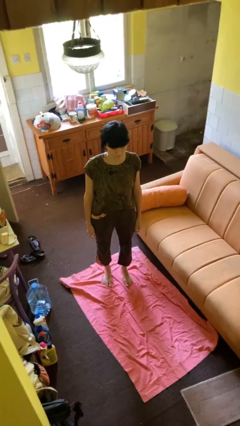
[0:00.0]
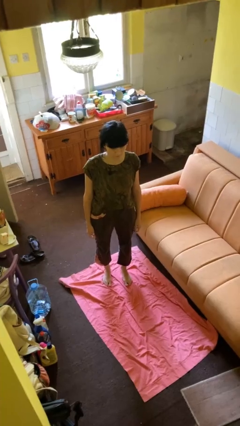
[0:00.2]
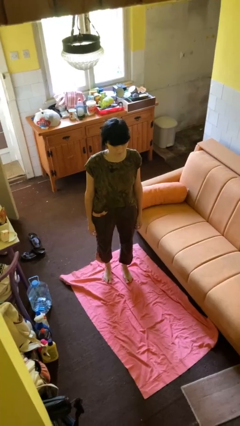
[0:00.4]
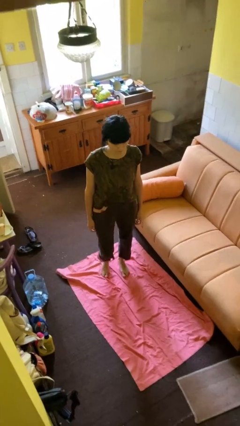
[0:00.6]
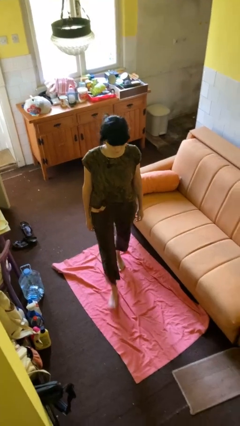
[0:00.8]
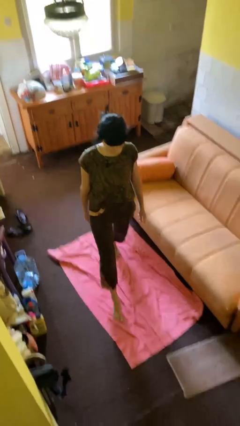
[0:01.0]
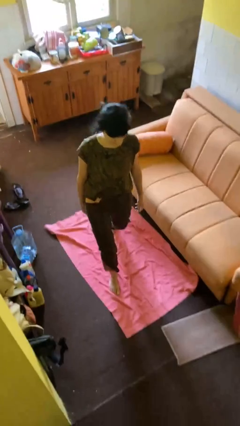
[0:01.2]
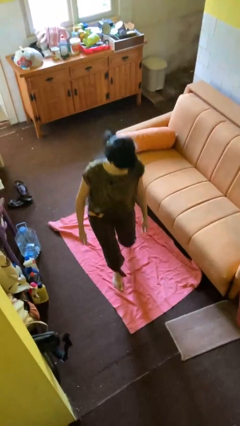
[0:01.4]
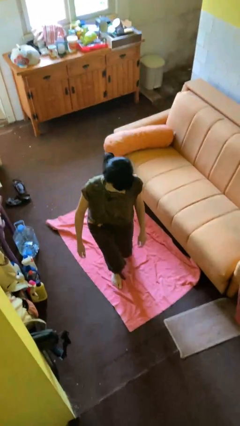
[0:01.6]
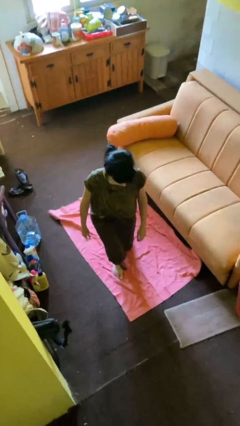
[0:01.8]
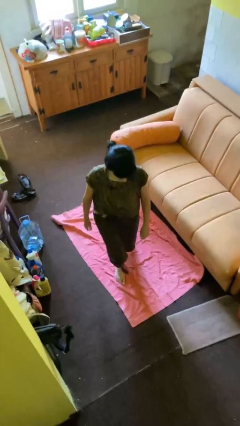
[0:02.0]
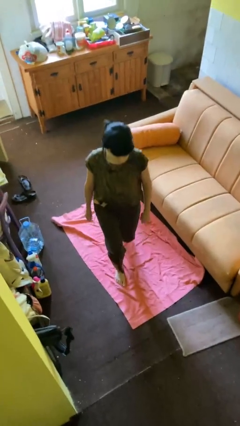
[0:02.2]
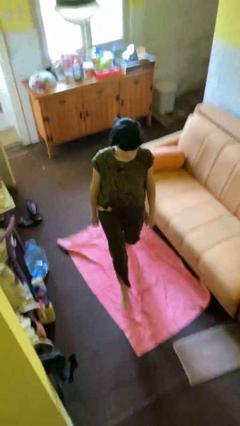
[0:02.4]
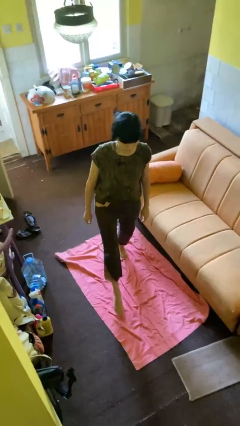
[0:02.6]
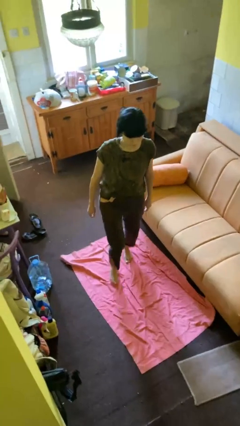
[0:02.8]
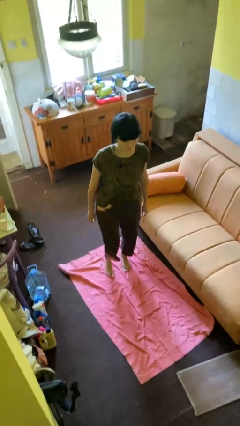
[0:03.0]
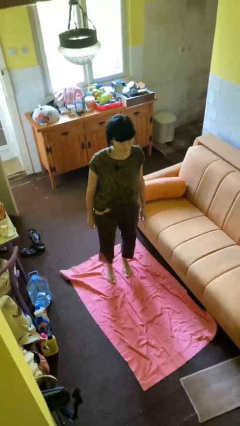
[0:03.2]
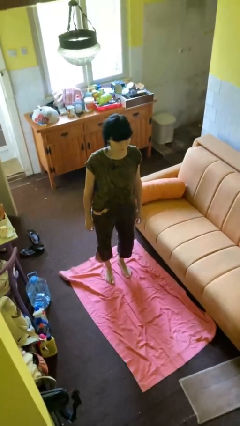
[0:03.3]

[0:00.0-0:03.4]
person exercises with lunges

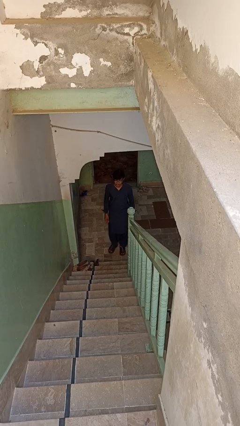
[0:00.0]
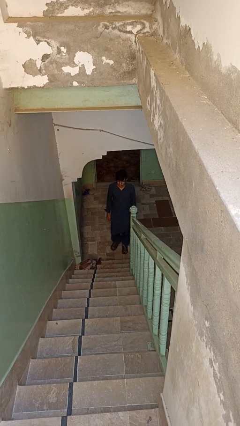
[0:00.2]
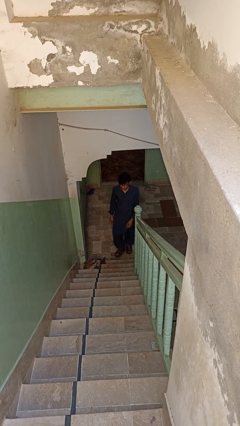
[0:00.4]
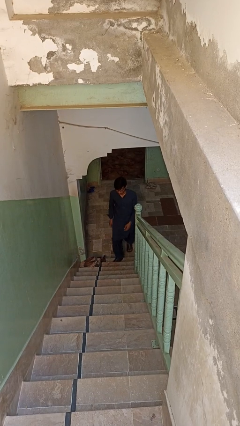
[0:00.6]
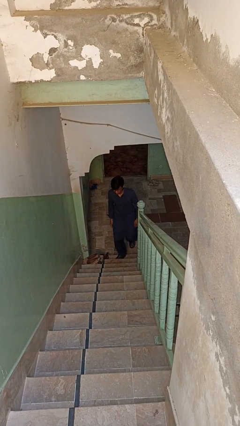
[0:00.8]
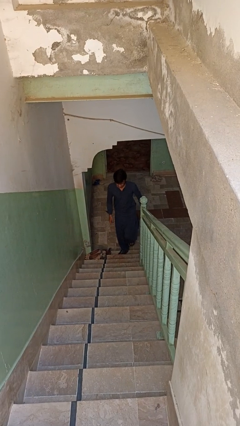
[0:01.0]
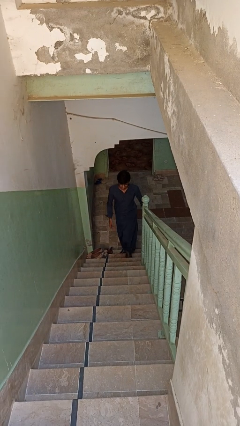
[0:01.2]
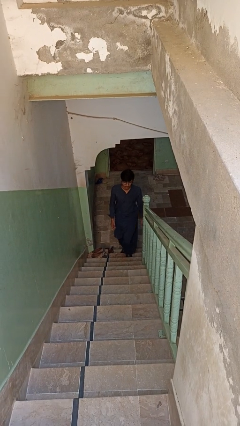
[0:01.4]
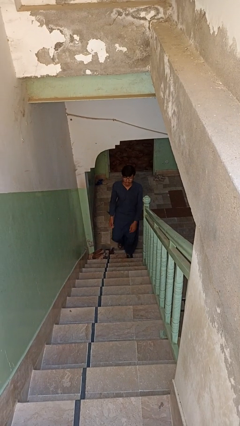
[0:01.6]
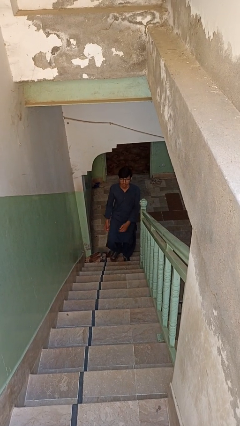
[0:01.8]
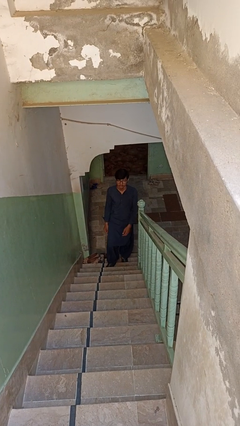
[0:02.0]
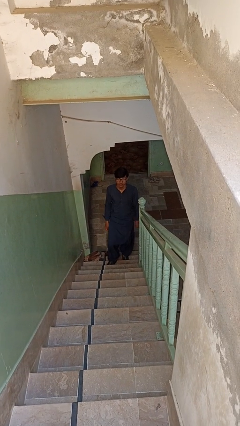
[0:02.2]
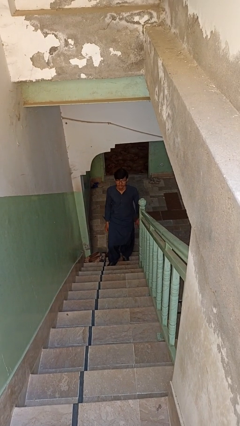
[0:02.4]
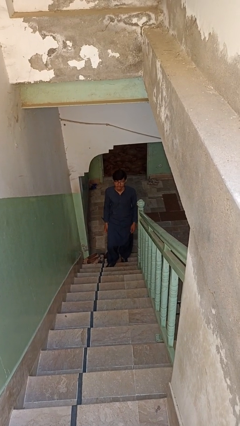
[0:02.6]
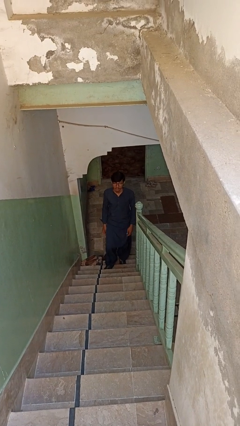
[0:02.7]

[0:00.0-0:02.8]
person climbs up stairs

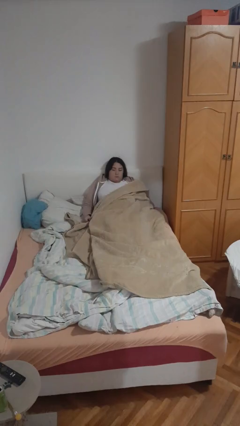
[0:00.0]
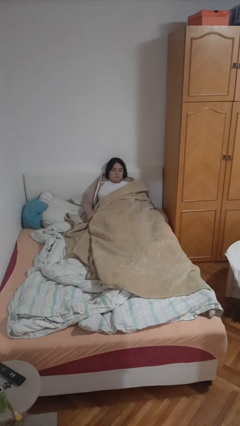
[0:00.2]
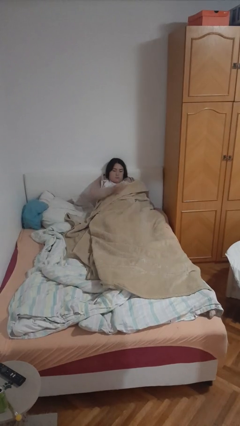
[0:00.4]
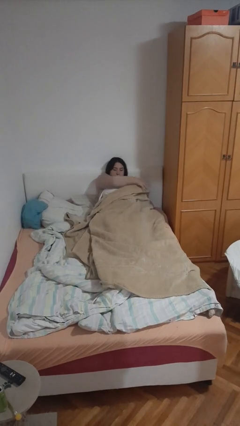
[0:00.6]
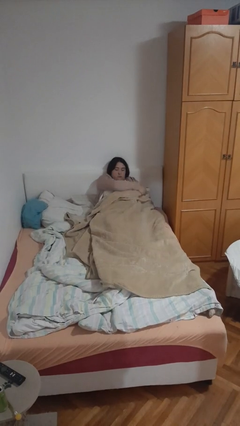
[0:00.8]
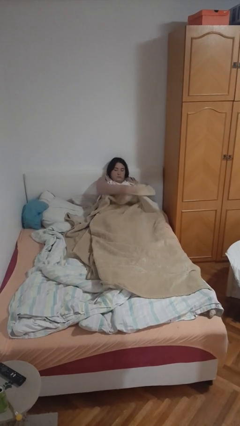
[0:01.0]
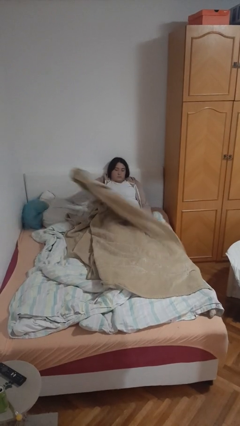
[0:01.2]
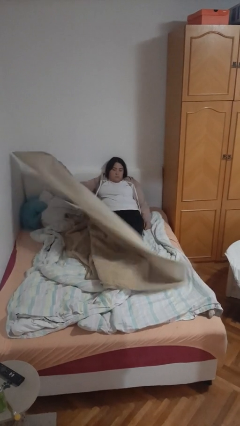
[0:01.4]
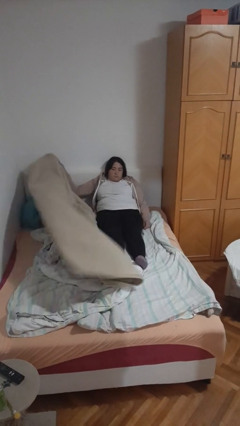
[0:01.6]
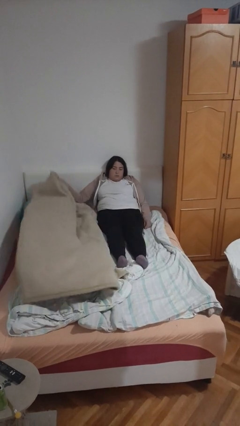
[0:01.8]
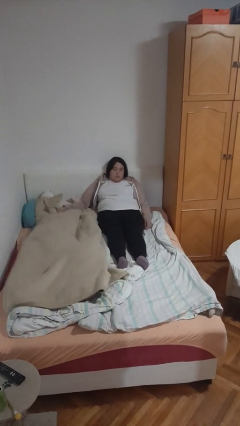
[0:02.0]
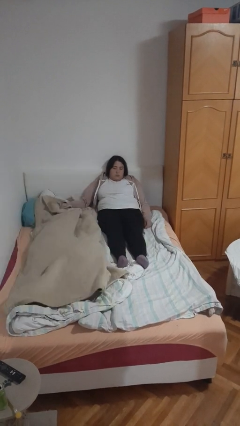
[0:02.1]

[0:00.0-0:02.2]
person uncovers with blanket

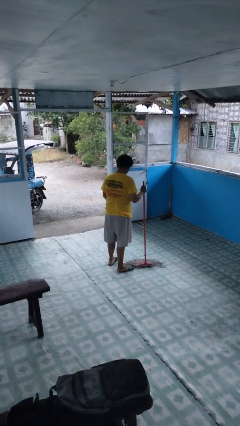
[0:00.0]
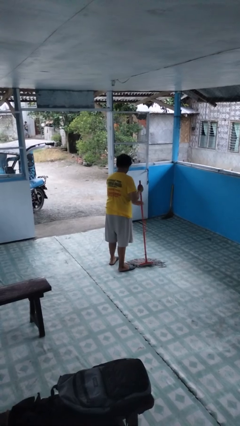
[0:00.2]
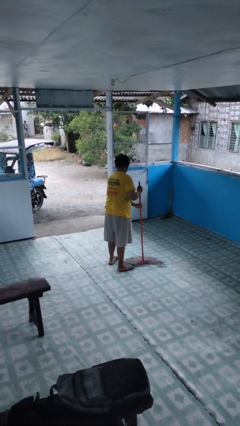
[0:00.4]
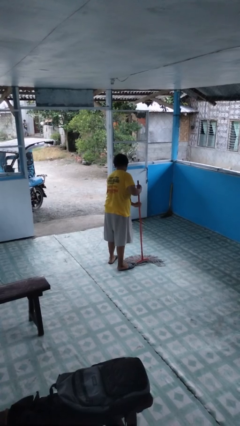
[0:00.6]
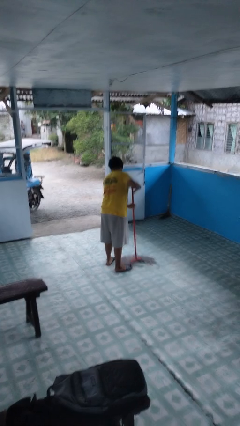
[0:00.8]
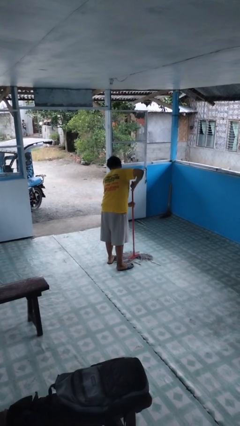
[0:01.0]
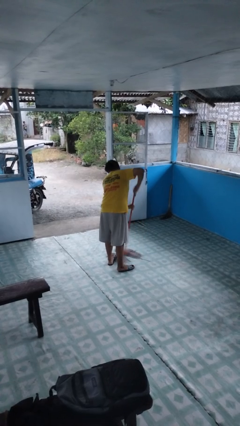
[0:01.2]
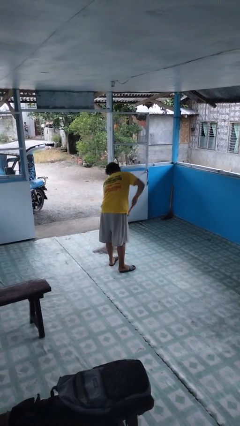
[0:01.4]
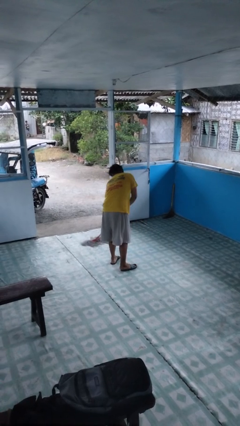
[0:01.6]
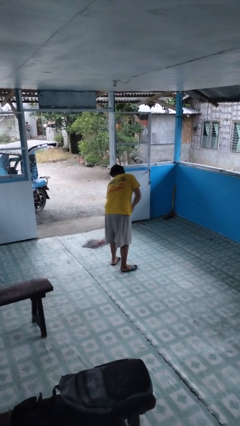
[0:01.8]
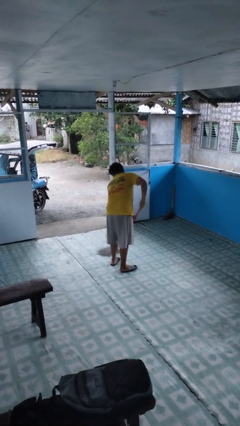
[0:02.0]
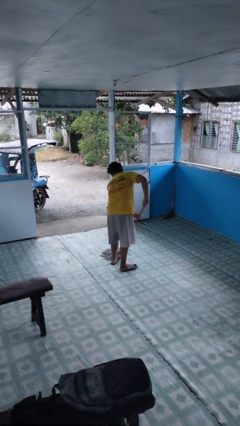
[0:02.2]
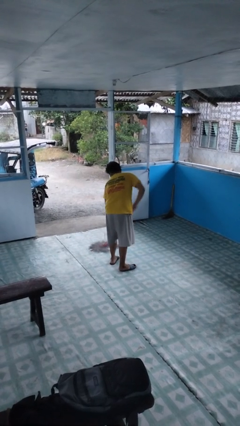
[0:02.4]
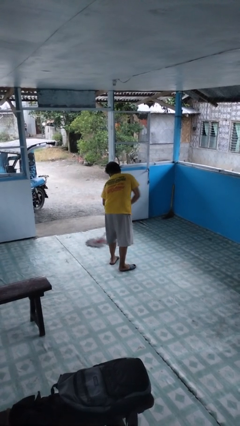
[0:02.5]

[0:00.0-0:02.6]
person mops

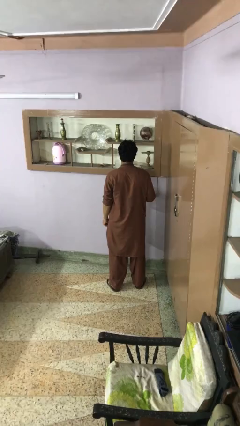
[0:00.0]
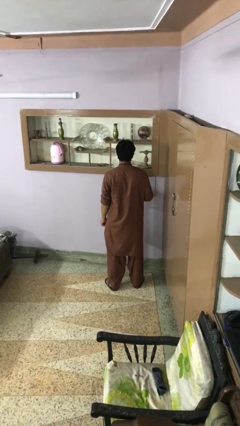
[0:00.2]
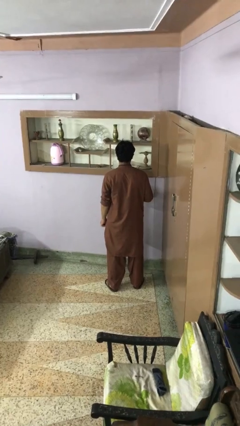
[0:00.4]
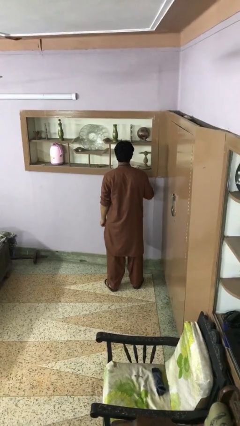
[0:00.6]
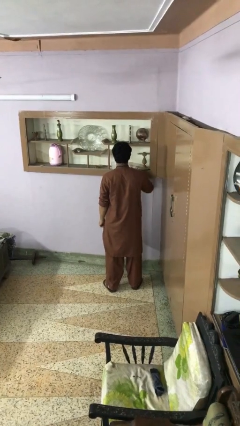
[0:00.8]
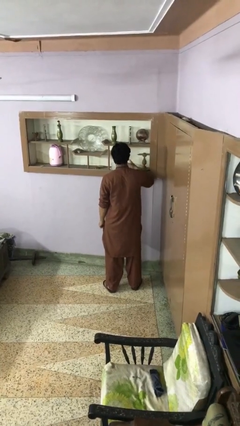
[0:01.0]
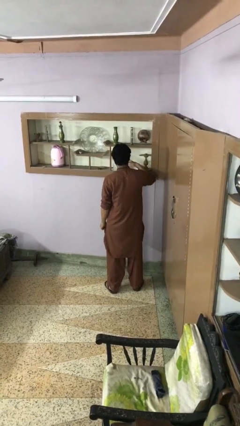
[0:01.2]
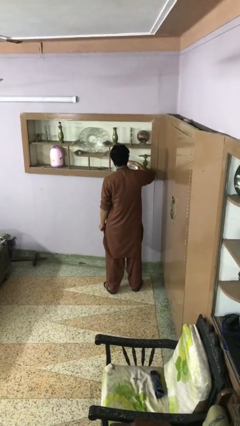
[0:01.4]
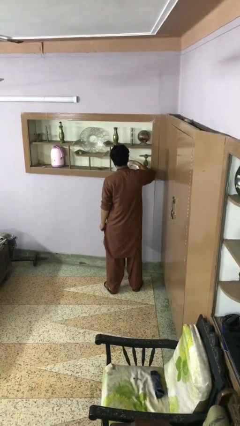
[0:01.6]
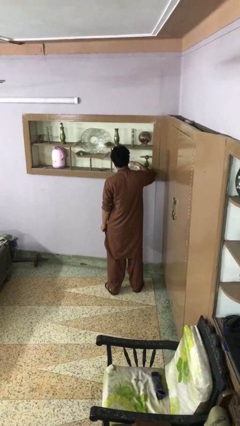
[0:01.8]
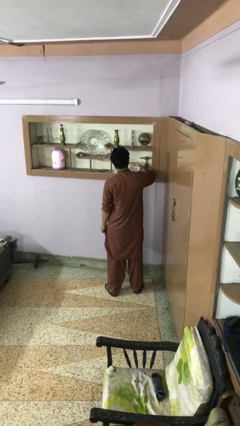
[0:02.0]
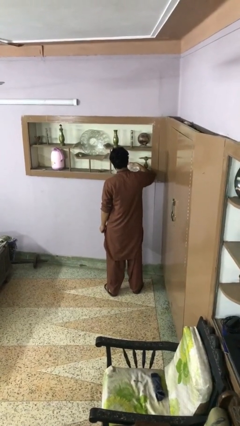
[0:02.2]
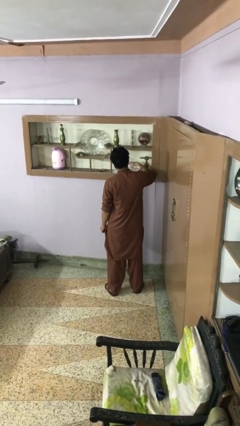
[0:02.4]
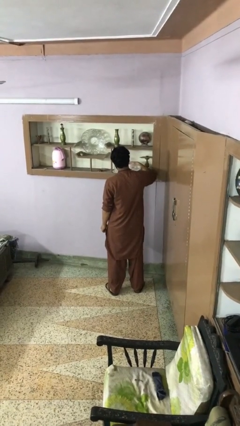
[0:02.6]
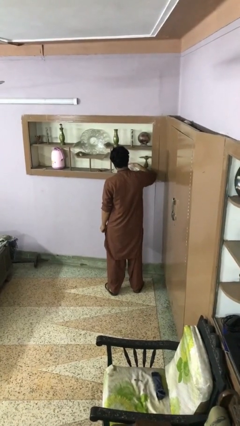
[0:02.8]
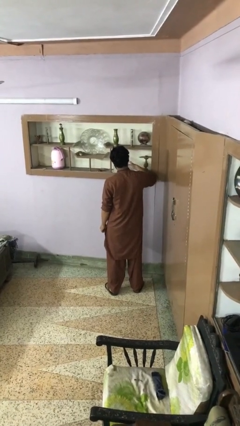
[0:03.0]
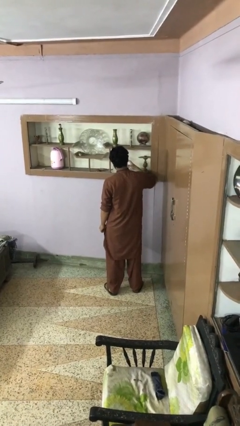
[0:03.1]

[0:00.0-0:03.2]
person pours into bowl

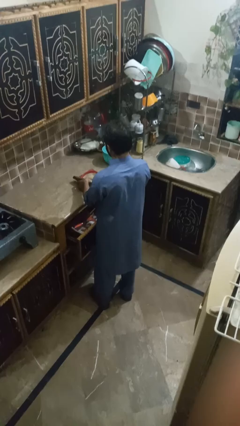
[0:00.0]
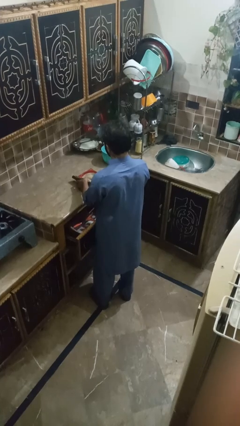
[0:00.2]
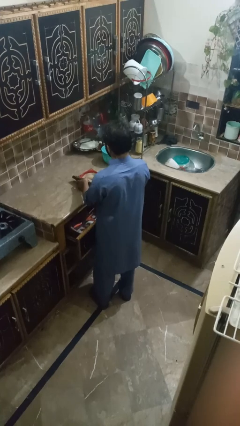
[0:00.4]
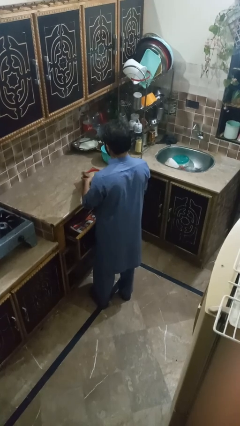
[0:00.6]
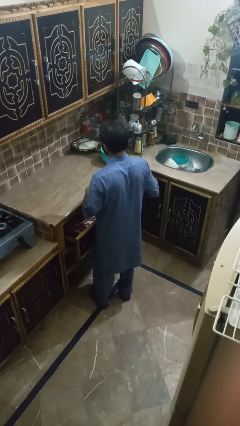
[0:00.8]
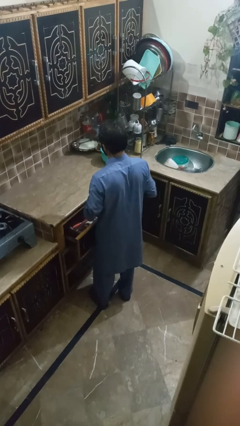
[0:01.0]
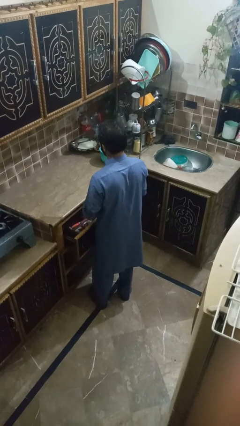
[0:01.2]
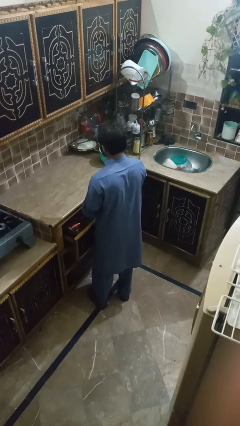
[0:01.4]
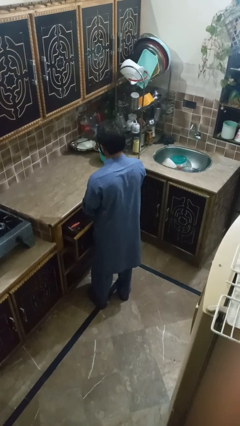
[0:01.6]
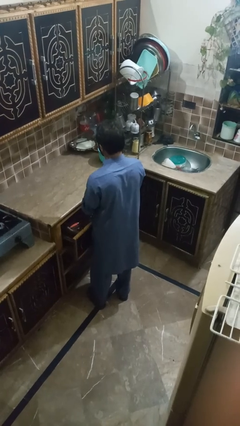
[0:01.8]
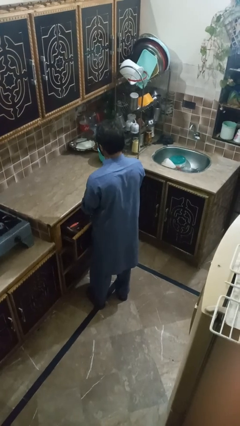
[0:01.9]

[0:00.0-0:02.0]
person puts object into kitchen drawer

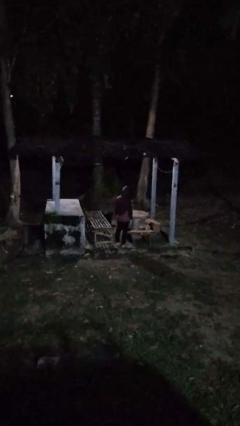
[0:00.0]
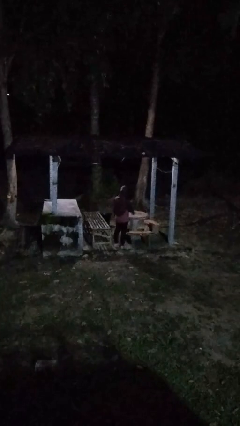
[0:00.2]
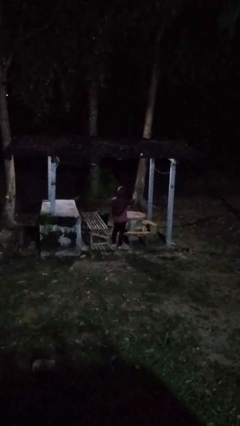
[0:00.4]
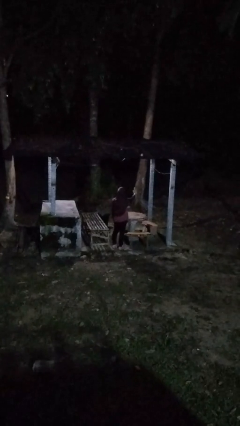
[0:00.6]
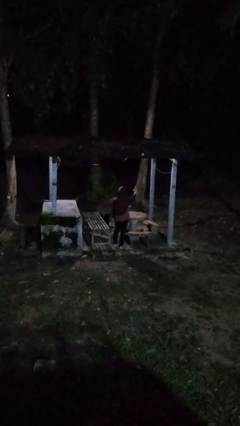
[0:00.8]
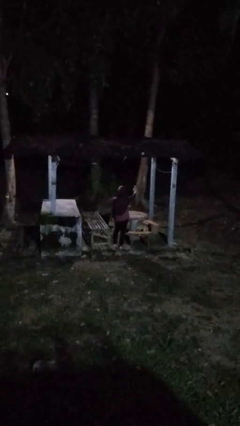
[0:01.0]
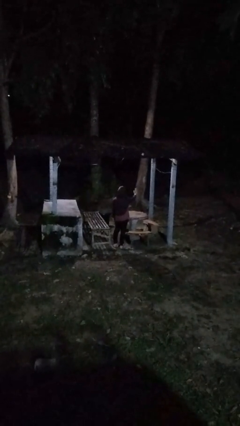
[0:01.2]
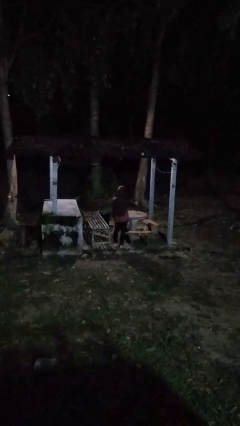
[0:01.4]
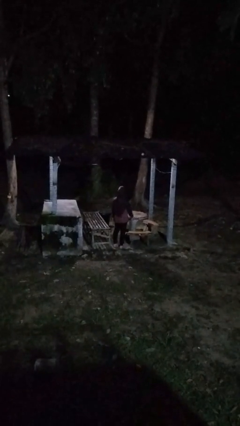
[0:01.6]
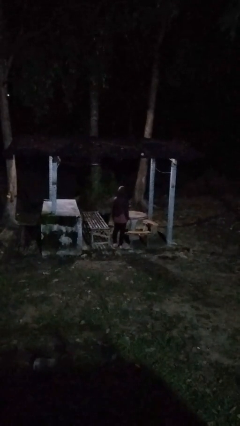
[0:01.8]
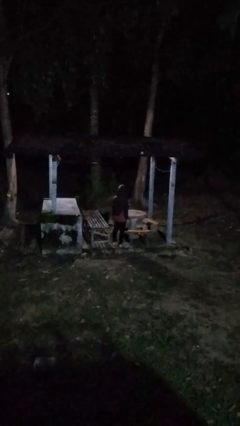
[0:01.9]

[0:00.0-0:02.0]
person gestures stop
